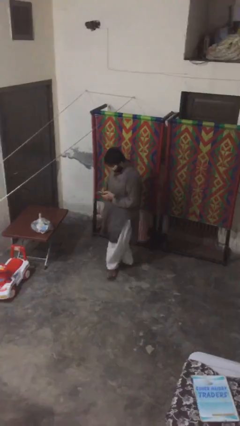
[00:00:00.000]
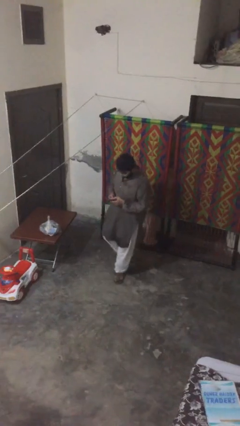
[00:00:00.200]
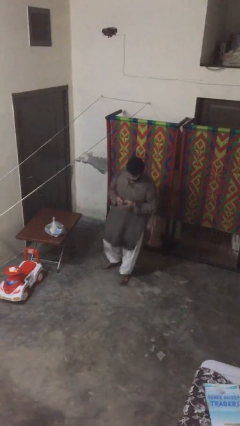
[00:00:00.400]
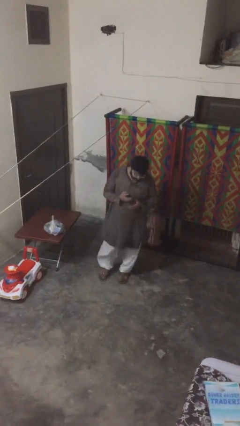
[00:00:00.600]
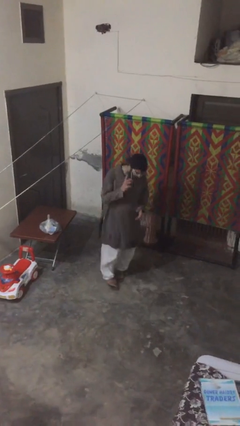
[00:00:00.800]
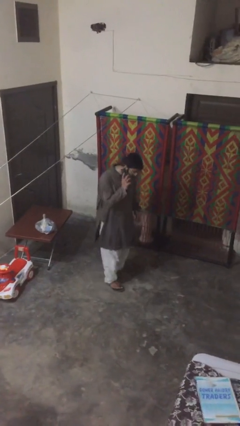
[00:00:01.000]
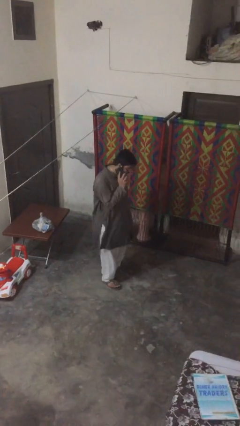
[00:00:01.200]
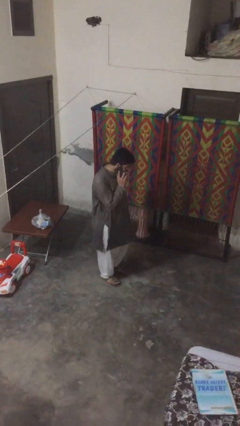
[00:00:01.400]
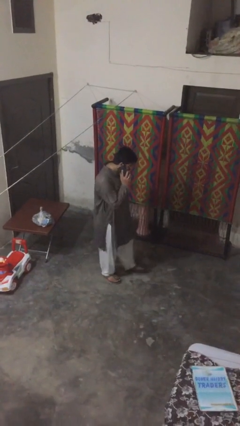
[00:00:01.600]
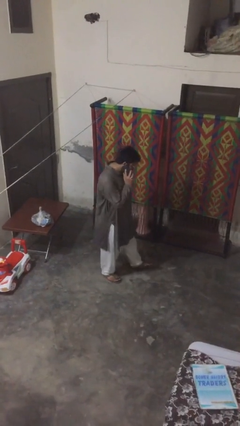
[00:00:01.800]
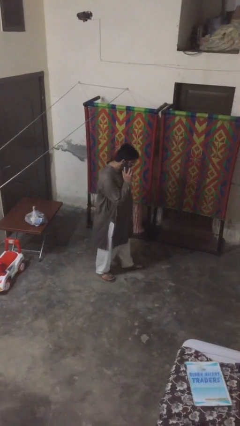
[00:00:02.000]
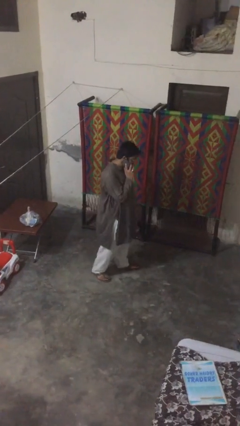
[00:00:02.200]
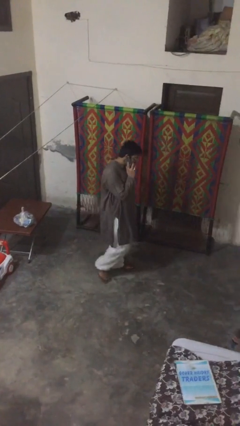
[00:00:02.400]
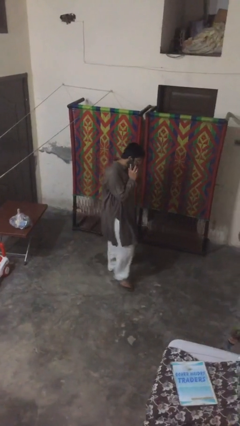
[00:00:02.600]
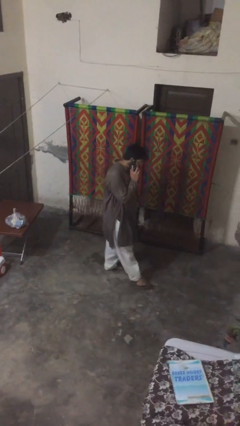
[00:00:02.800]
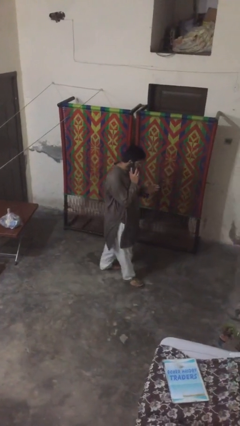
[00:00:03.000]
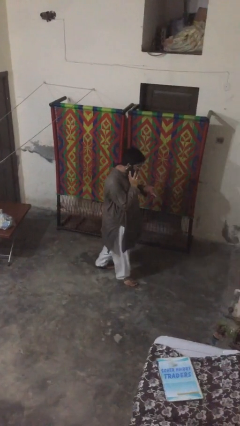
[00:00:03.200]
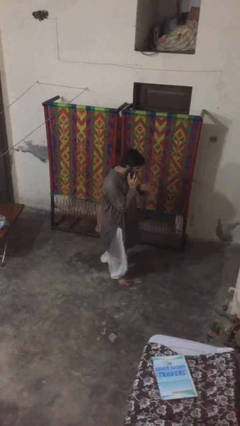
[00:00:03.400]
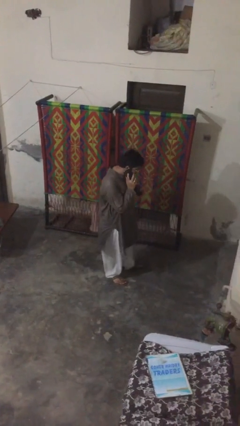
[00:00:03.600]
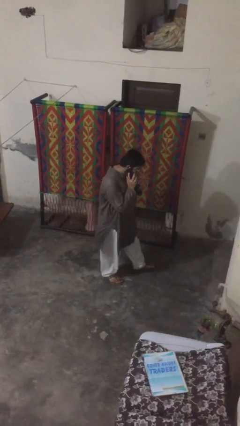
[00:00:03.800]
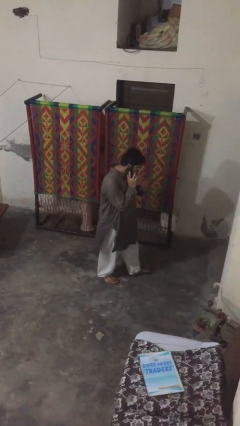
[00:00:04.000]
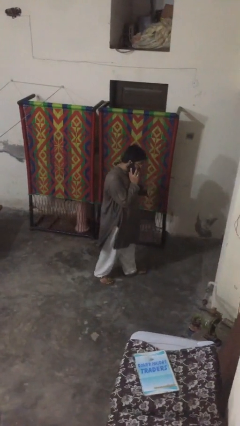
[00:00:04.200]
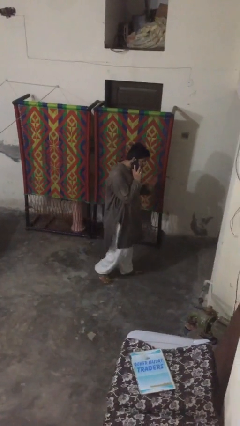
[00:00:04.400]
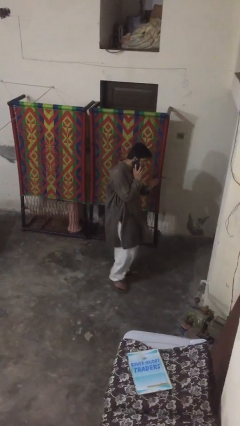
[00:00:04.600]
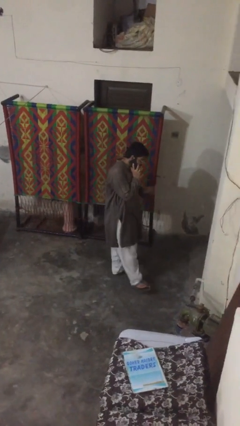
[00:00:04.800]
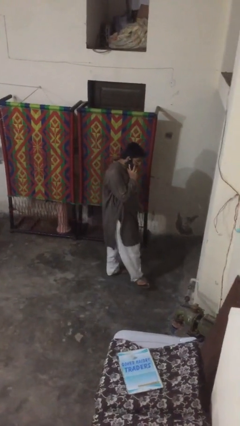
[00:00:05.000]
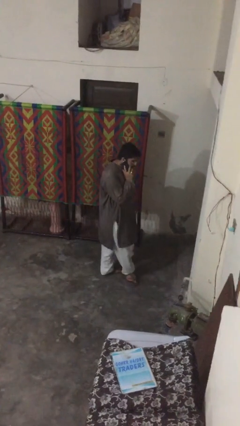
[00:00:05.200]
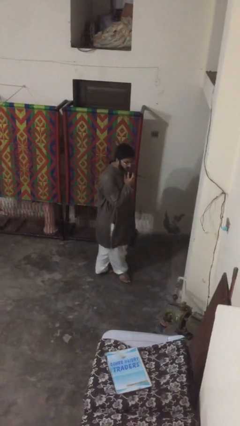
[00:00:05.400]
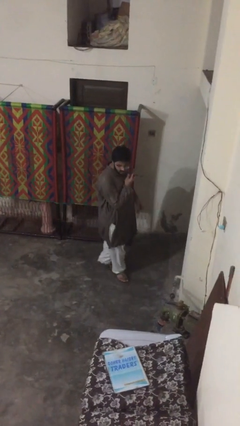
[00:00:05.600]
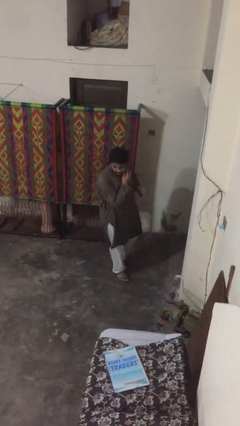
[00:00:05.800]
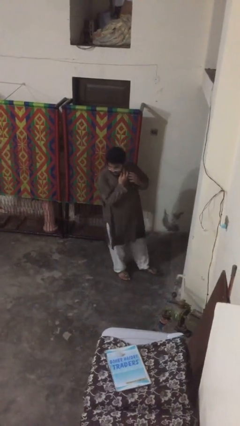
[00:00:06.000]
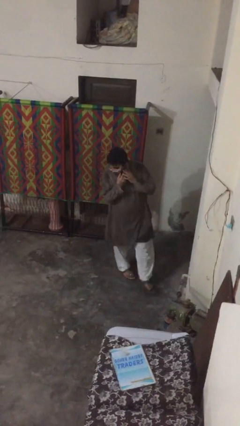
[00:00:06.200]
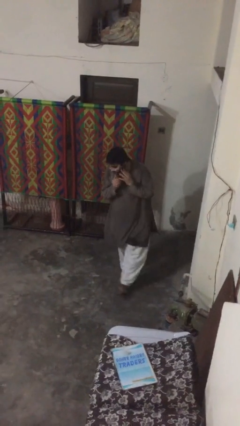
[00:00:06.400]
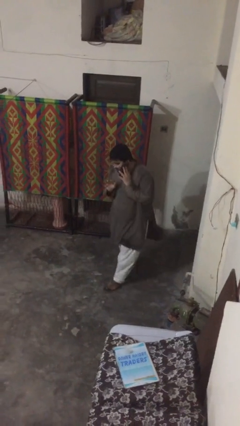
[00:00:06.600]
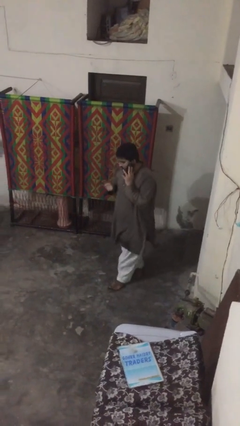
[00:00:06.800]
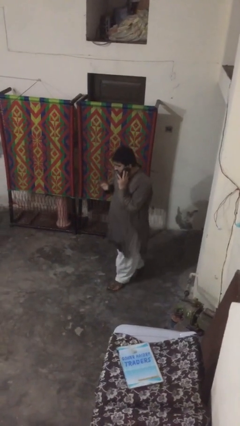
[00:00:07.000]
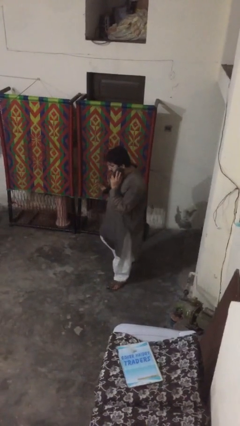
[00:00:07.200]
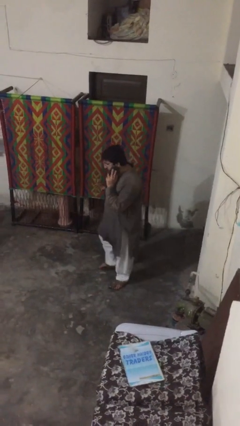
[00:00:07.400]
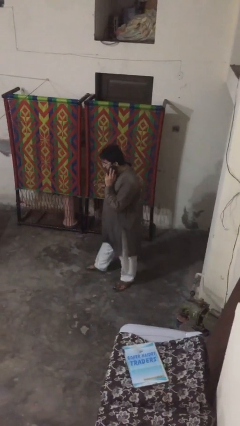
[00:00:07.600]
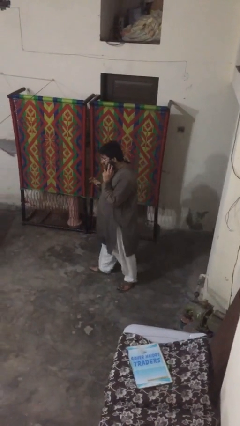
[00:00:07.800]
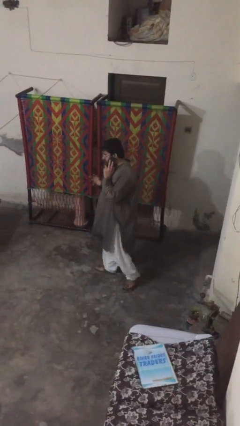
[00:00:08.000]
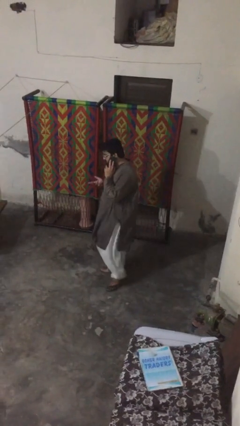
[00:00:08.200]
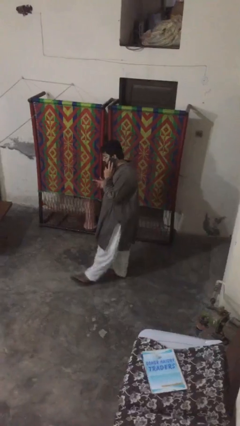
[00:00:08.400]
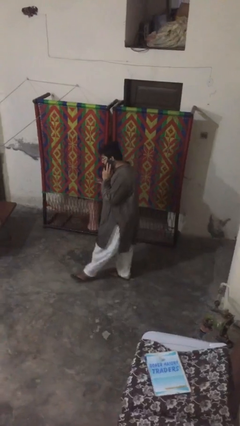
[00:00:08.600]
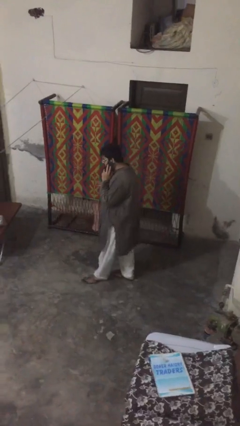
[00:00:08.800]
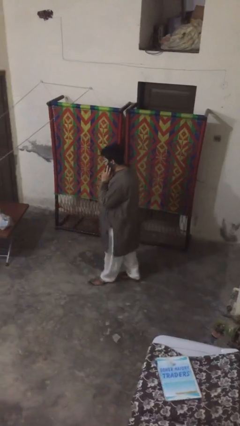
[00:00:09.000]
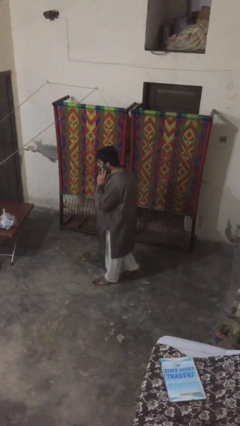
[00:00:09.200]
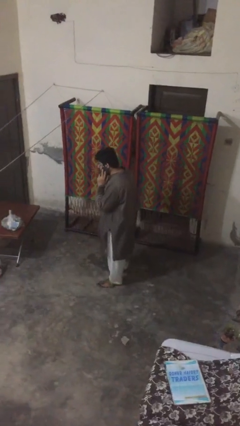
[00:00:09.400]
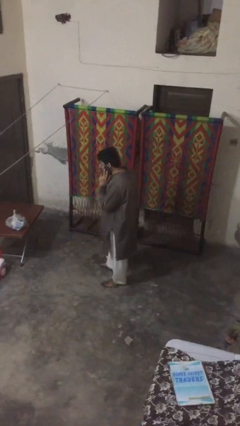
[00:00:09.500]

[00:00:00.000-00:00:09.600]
person talks on phone

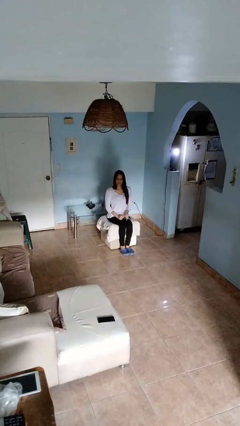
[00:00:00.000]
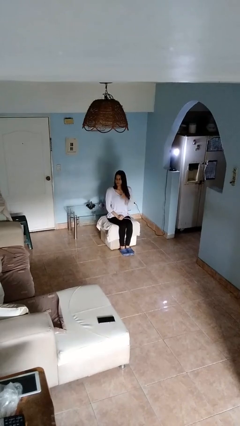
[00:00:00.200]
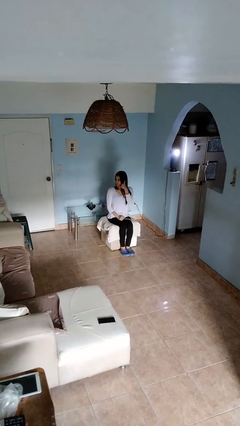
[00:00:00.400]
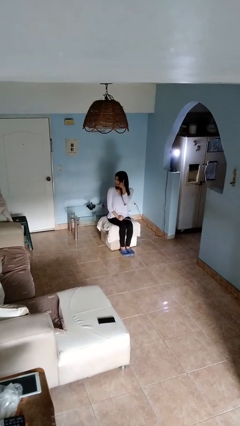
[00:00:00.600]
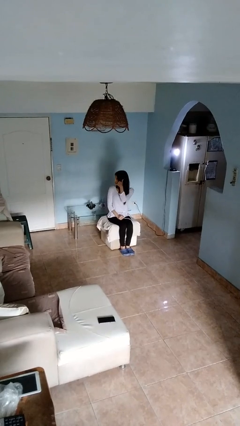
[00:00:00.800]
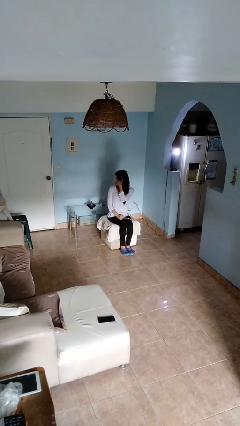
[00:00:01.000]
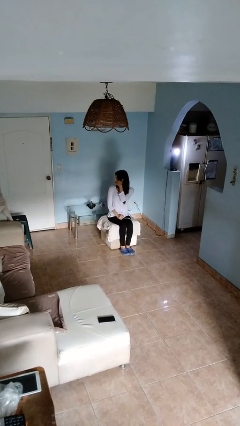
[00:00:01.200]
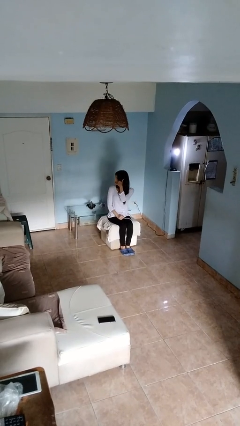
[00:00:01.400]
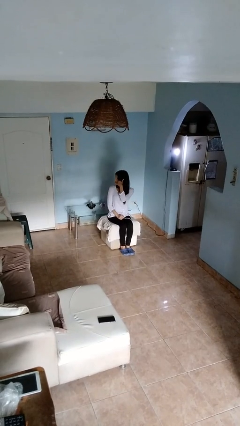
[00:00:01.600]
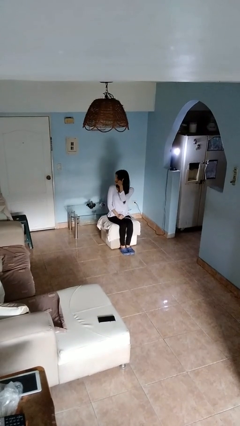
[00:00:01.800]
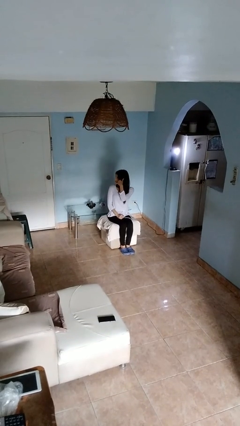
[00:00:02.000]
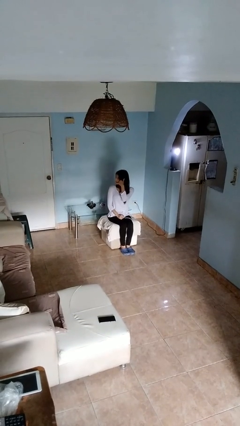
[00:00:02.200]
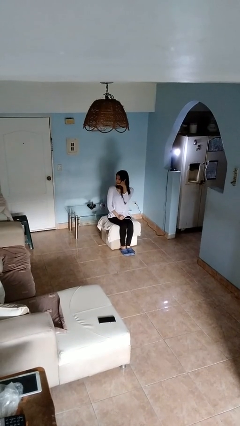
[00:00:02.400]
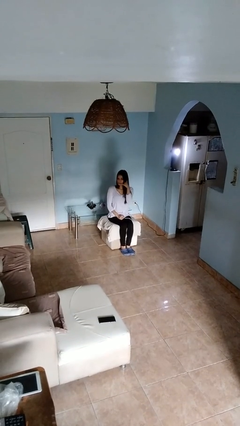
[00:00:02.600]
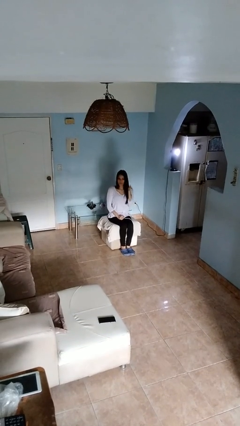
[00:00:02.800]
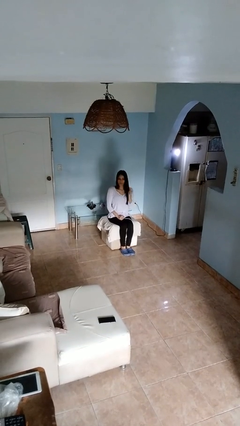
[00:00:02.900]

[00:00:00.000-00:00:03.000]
person gestures call me

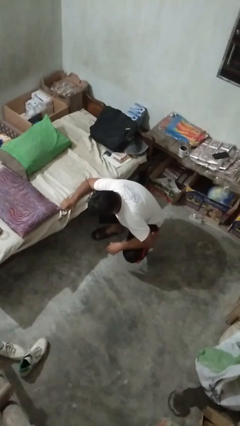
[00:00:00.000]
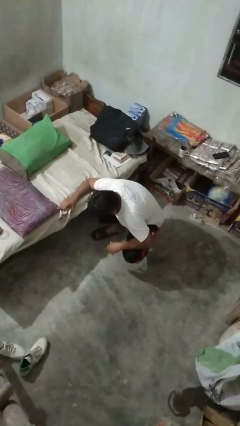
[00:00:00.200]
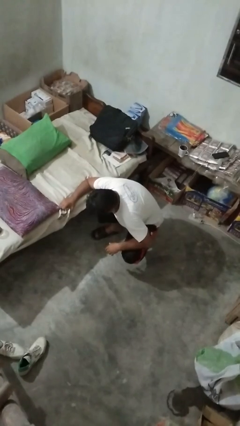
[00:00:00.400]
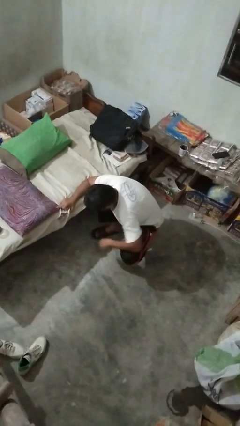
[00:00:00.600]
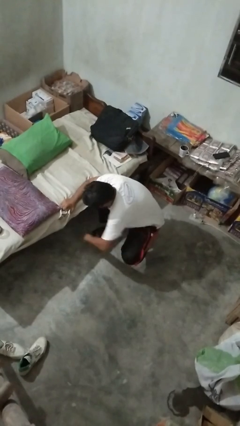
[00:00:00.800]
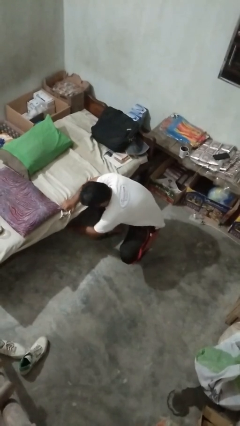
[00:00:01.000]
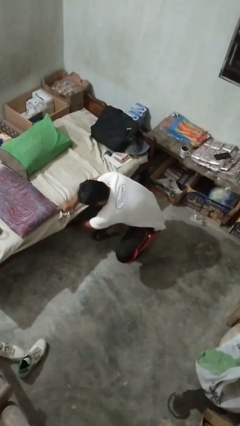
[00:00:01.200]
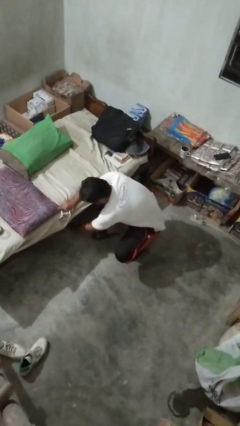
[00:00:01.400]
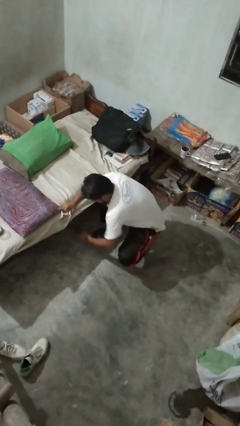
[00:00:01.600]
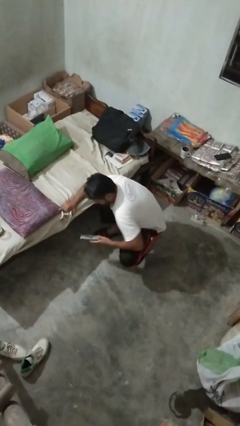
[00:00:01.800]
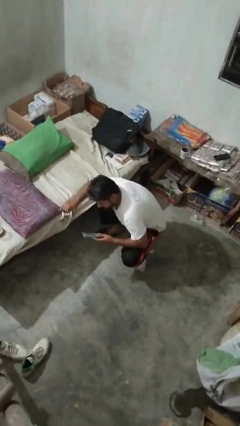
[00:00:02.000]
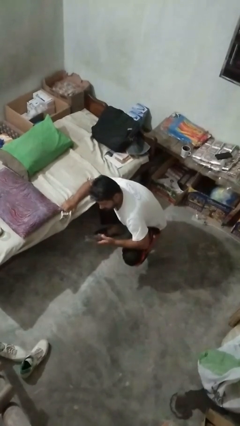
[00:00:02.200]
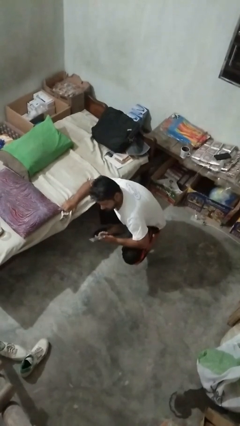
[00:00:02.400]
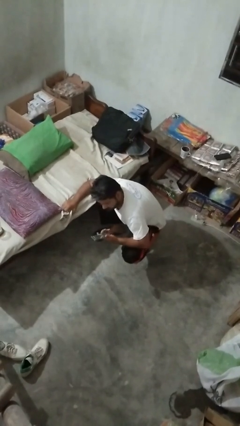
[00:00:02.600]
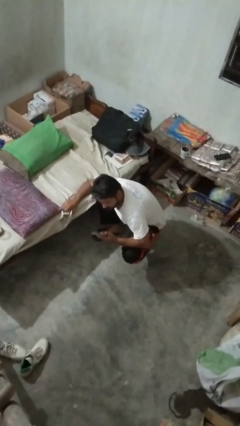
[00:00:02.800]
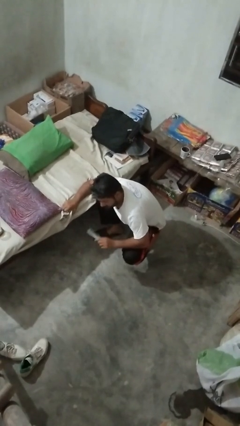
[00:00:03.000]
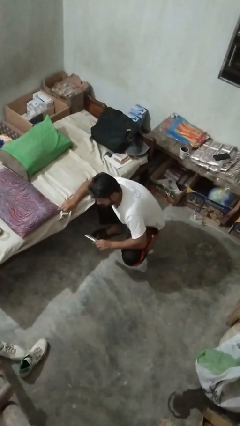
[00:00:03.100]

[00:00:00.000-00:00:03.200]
person searches under couch

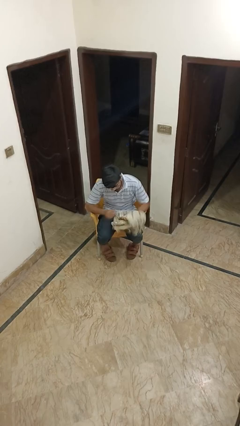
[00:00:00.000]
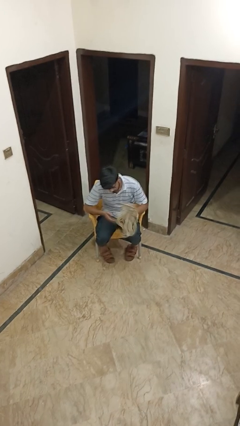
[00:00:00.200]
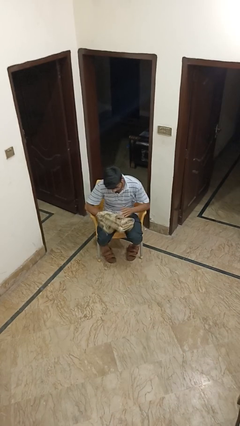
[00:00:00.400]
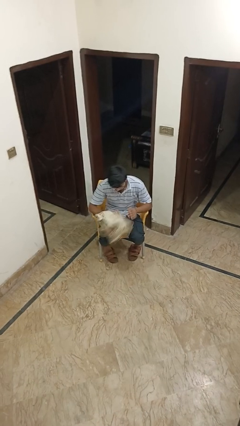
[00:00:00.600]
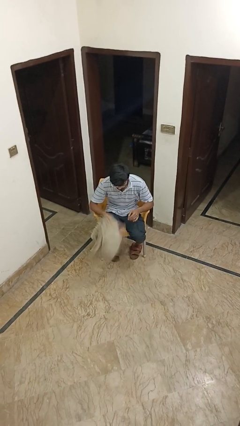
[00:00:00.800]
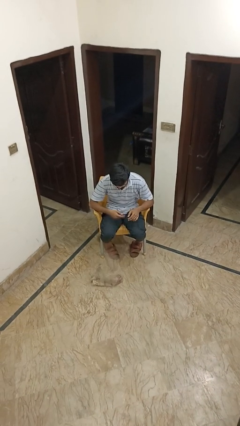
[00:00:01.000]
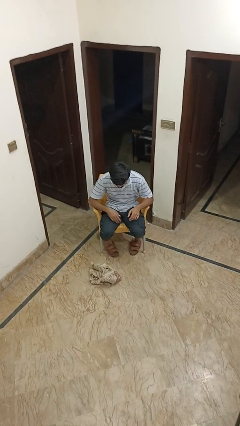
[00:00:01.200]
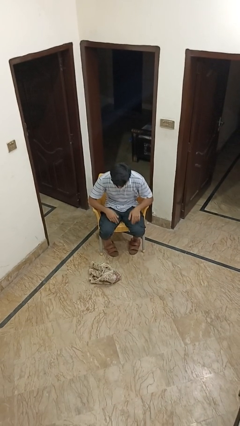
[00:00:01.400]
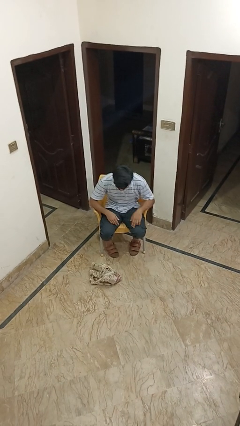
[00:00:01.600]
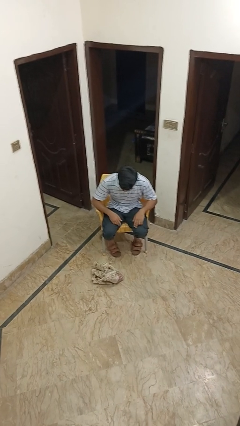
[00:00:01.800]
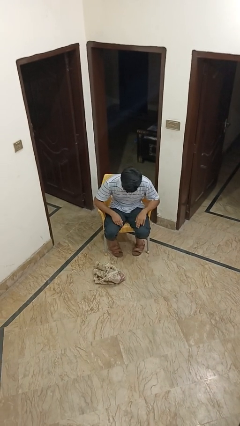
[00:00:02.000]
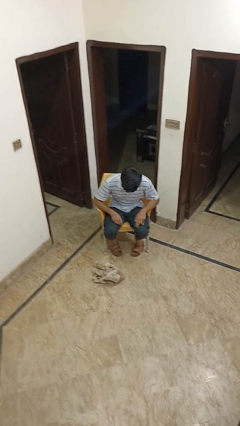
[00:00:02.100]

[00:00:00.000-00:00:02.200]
person drops object
